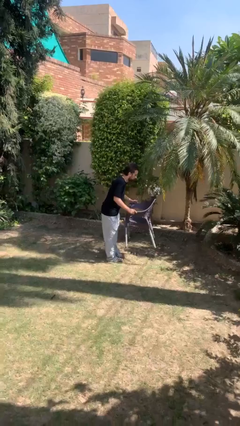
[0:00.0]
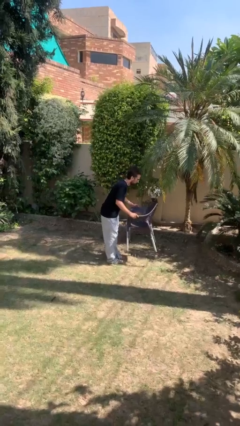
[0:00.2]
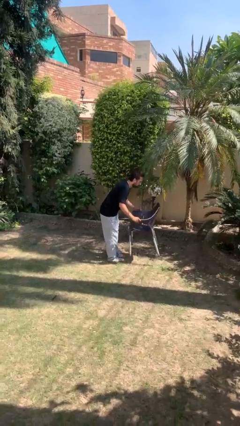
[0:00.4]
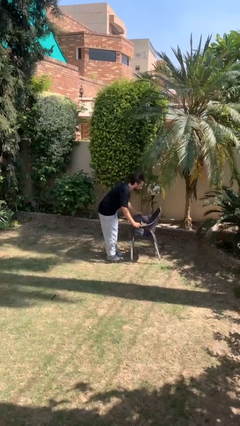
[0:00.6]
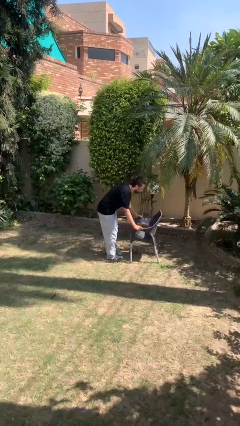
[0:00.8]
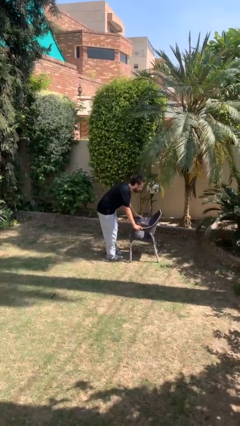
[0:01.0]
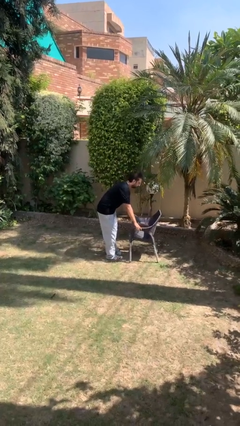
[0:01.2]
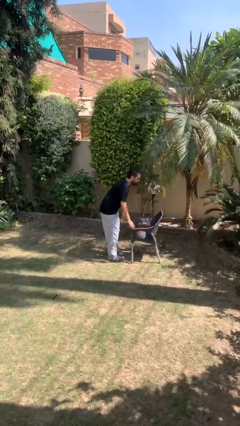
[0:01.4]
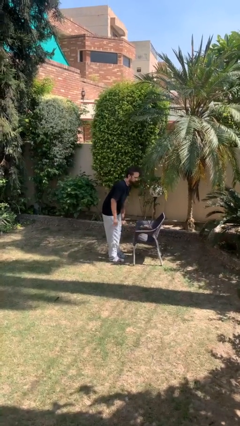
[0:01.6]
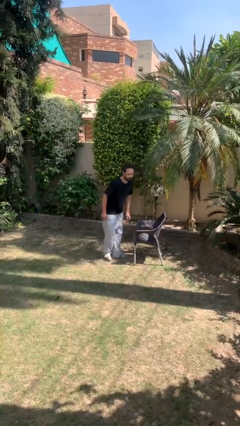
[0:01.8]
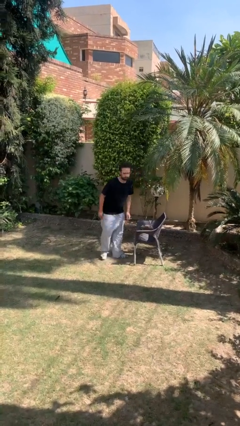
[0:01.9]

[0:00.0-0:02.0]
person puts down object on floor

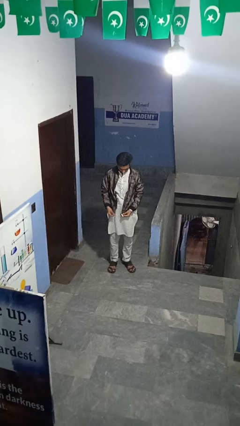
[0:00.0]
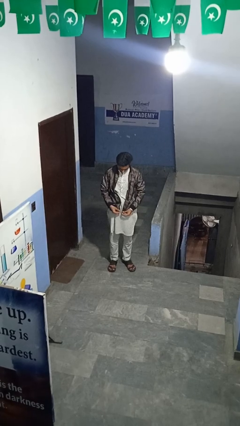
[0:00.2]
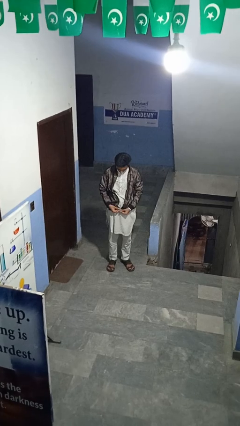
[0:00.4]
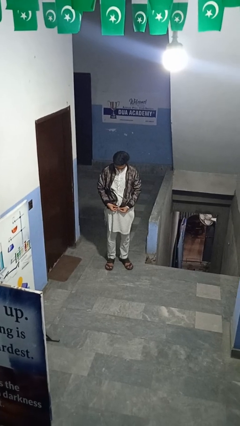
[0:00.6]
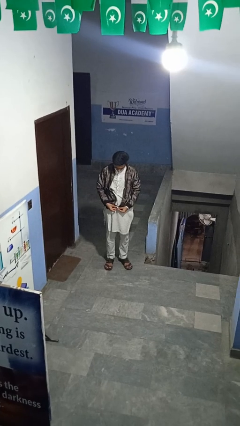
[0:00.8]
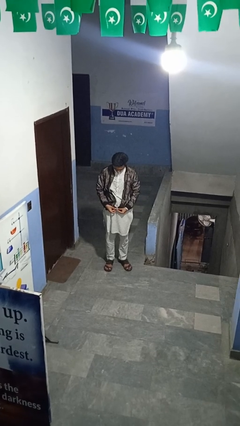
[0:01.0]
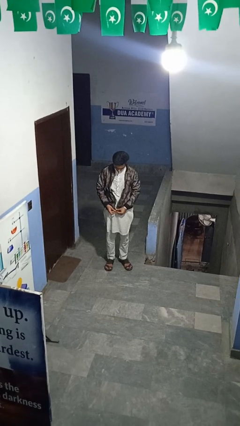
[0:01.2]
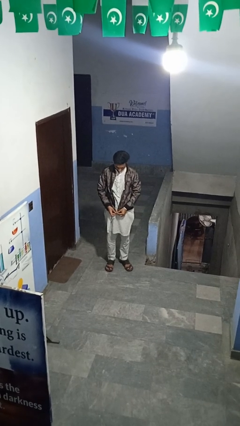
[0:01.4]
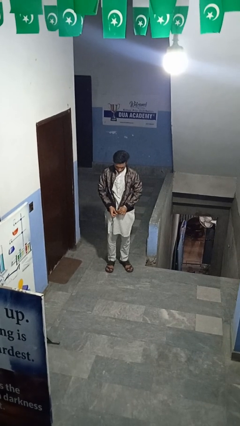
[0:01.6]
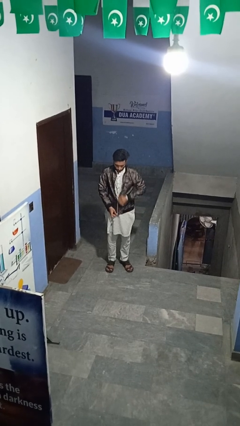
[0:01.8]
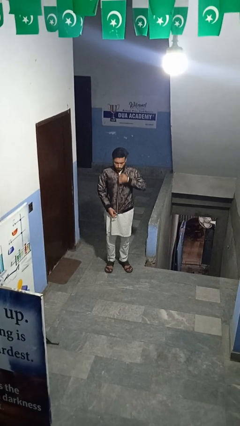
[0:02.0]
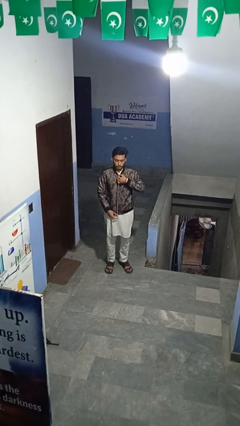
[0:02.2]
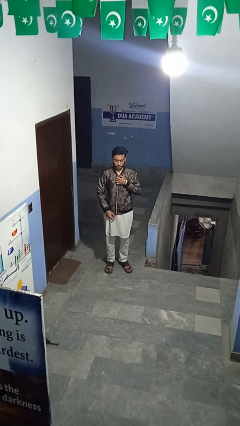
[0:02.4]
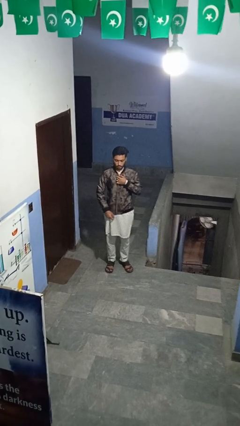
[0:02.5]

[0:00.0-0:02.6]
person zips up jacket

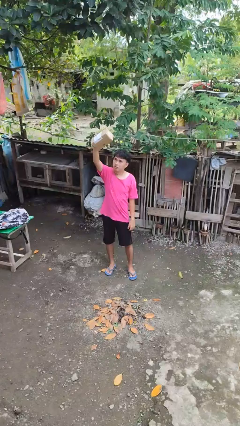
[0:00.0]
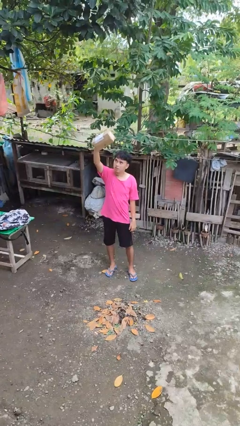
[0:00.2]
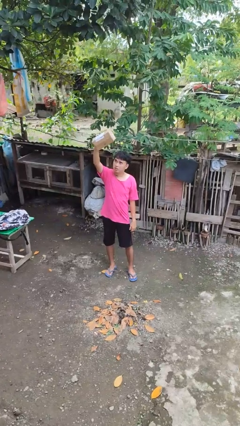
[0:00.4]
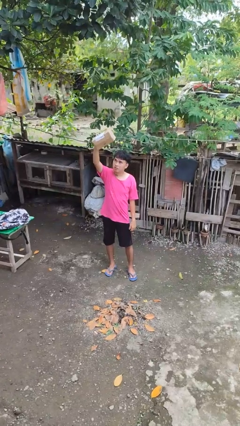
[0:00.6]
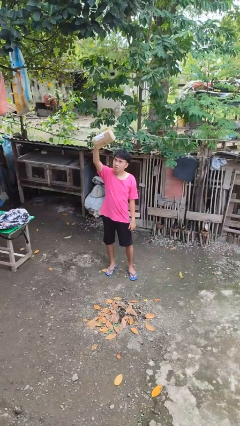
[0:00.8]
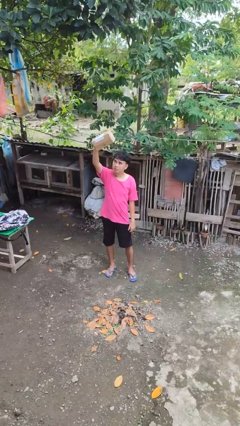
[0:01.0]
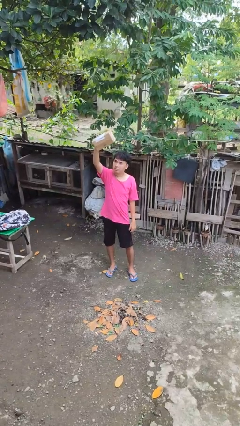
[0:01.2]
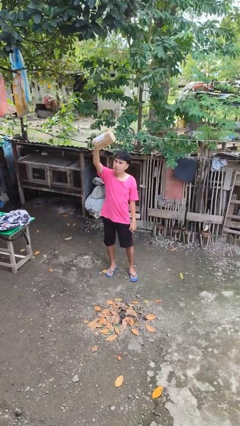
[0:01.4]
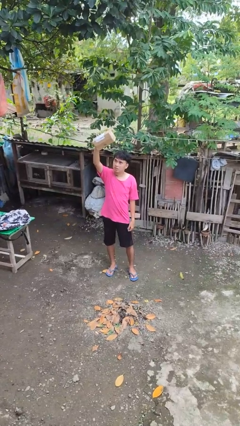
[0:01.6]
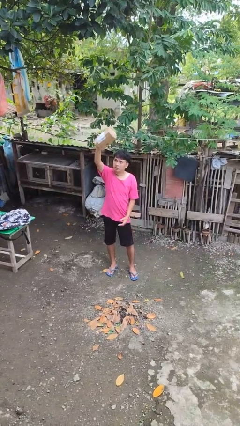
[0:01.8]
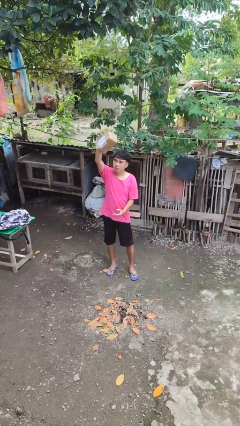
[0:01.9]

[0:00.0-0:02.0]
person drops object

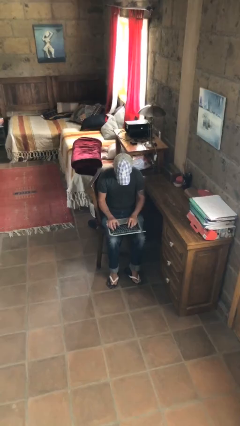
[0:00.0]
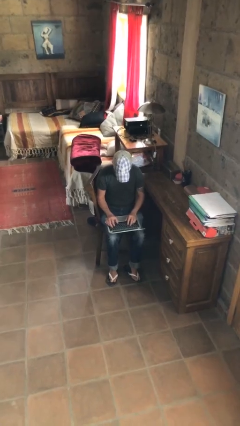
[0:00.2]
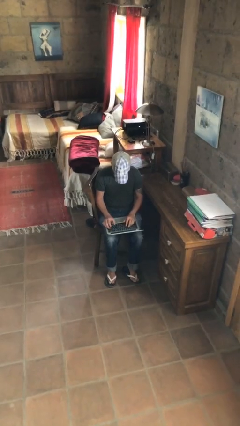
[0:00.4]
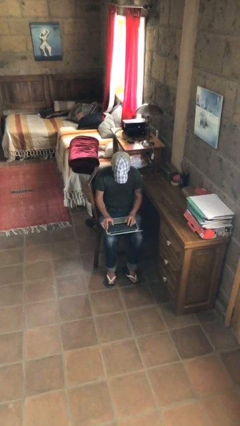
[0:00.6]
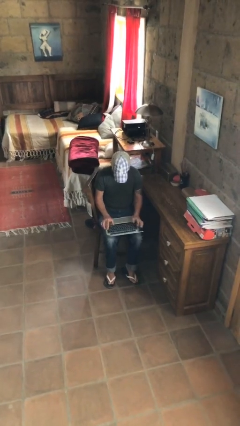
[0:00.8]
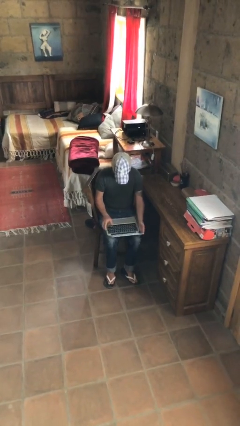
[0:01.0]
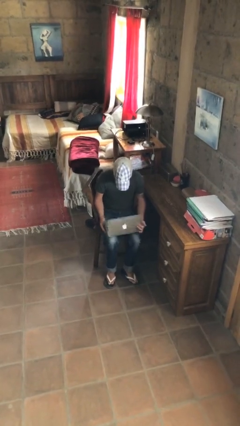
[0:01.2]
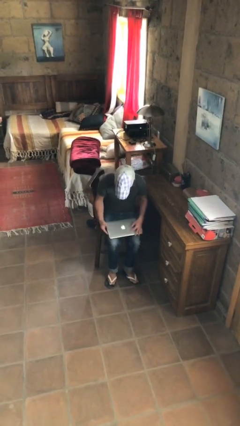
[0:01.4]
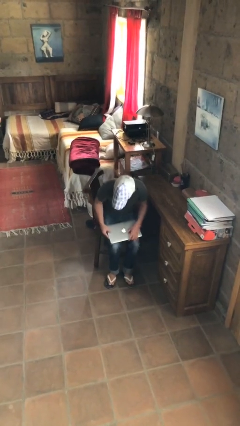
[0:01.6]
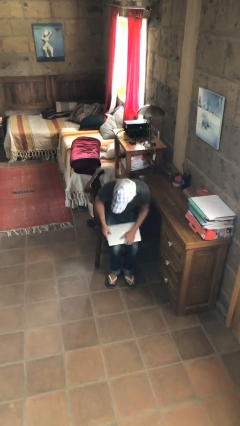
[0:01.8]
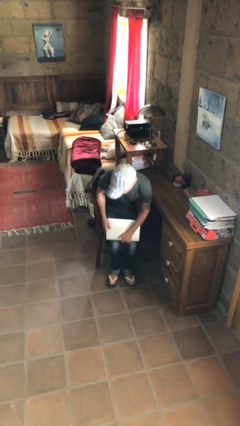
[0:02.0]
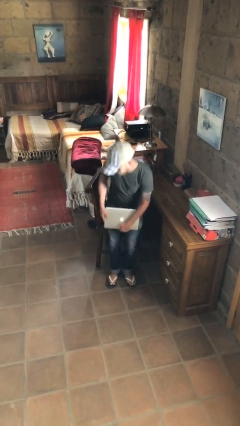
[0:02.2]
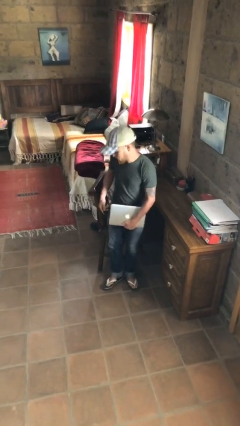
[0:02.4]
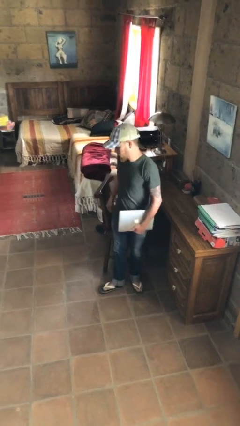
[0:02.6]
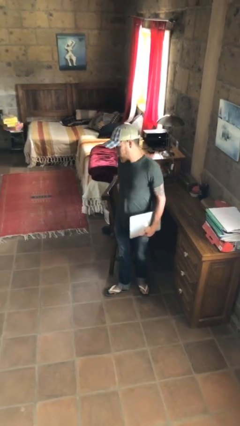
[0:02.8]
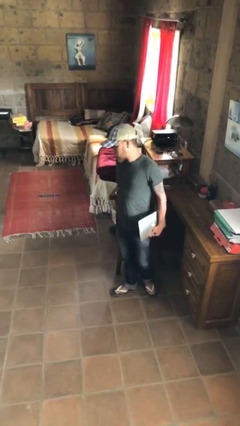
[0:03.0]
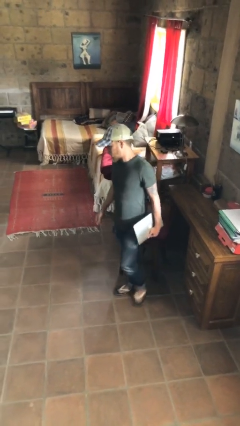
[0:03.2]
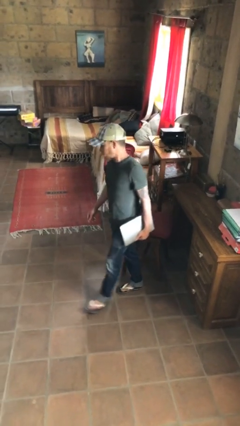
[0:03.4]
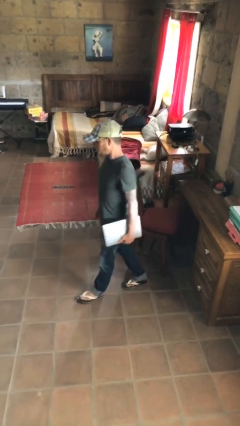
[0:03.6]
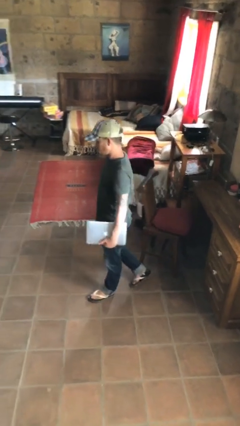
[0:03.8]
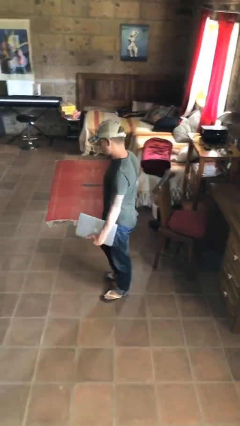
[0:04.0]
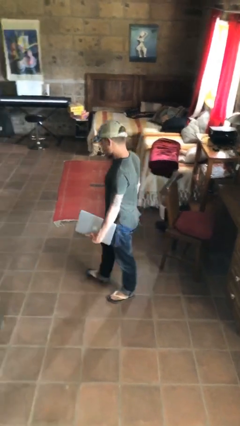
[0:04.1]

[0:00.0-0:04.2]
person stands up

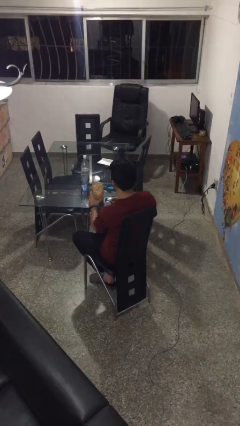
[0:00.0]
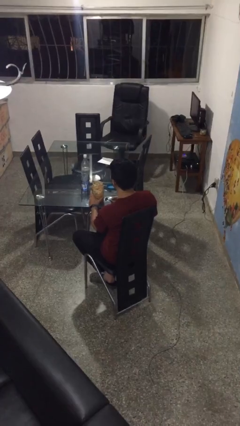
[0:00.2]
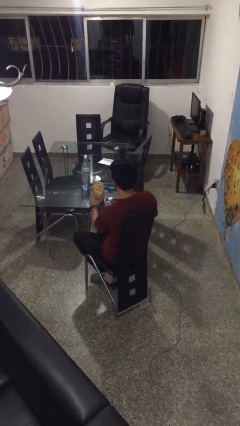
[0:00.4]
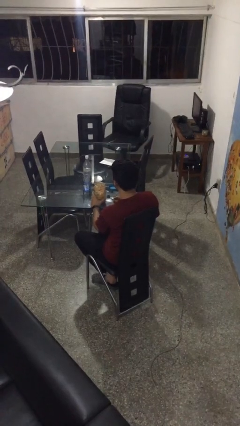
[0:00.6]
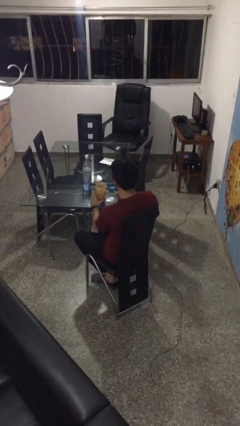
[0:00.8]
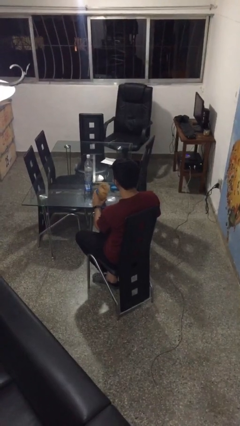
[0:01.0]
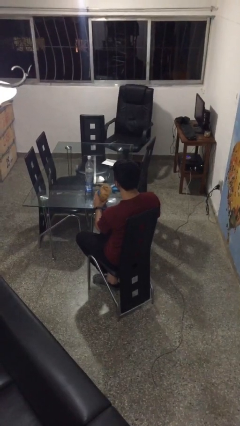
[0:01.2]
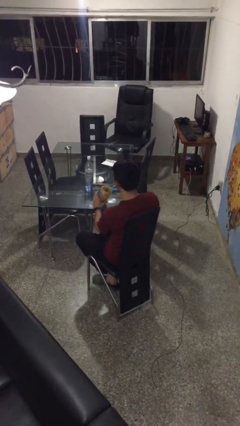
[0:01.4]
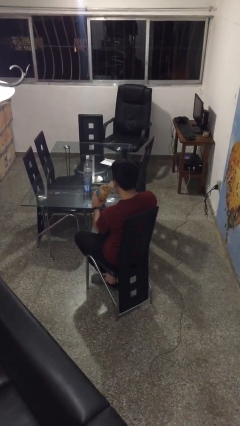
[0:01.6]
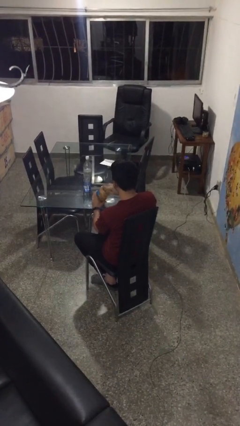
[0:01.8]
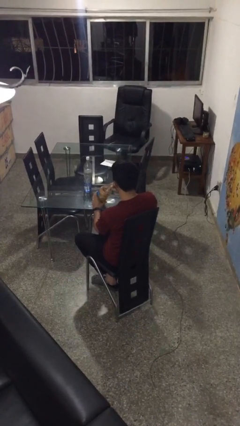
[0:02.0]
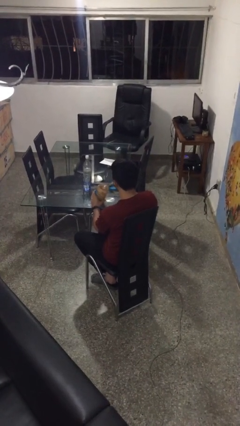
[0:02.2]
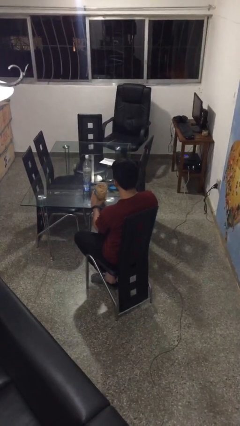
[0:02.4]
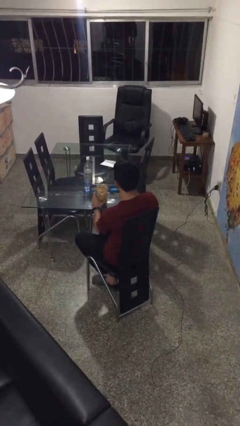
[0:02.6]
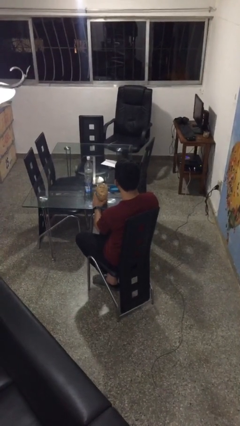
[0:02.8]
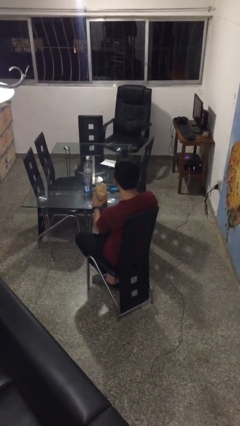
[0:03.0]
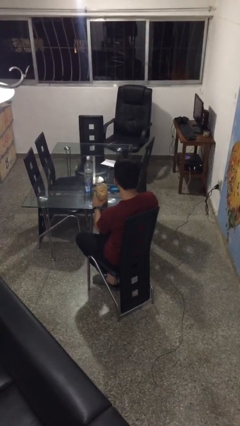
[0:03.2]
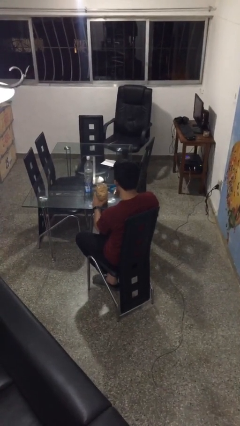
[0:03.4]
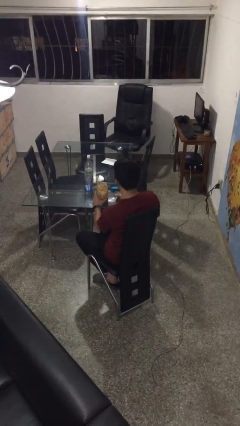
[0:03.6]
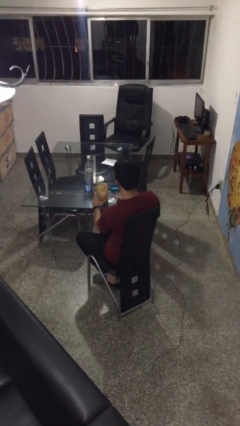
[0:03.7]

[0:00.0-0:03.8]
person eats with utensil

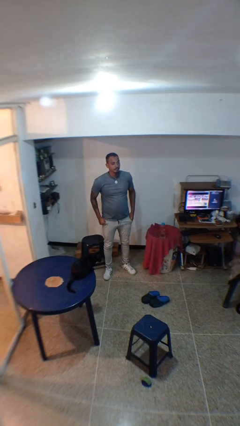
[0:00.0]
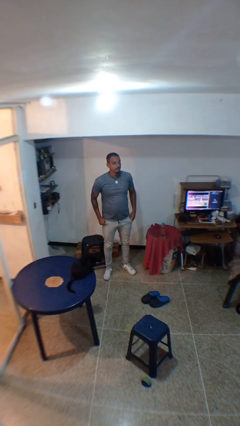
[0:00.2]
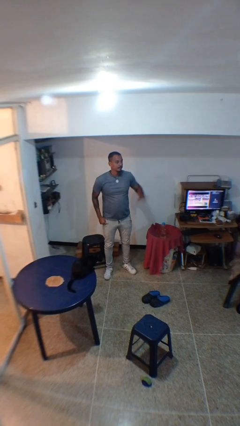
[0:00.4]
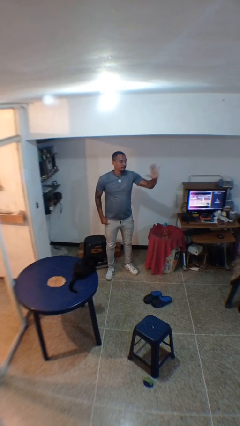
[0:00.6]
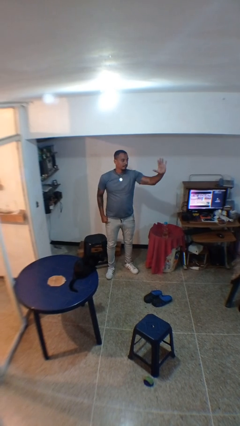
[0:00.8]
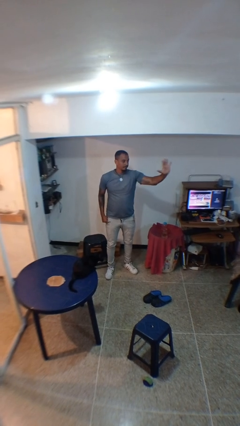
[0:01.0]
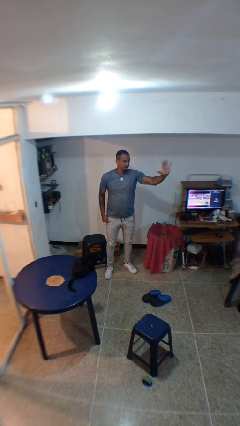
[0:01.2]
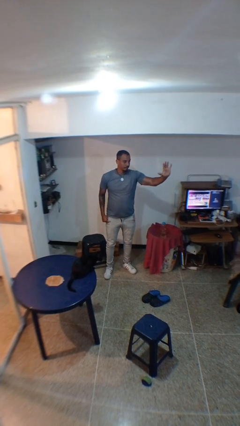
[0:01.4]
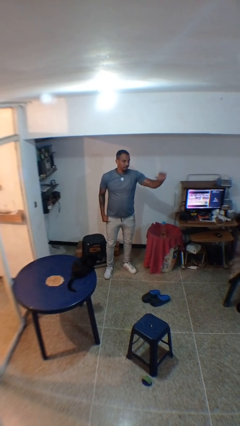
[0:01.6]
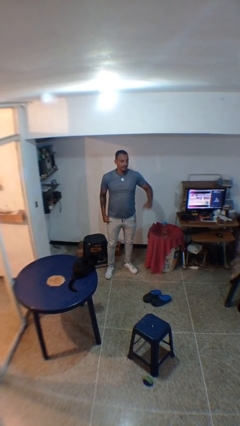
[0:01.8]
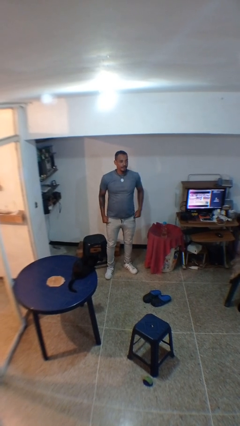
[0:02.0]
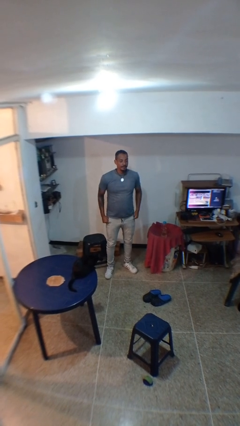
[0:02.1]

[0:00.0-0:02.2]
person gestures number five

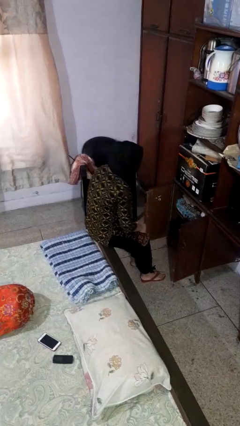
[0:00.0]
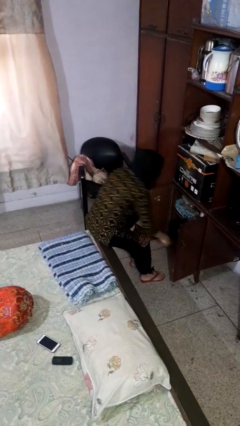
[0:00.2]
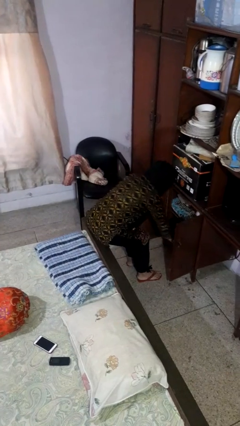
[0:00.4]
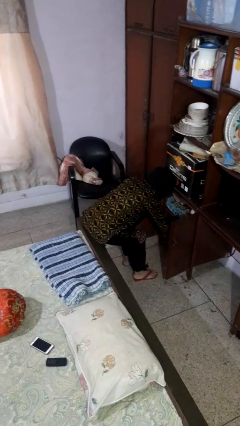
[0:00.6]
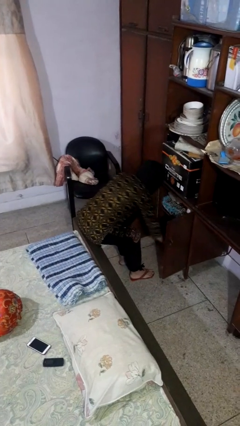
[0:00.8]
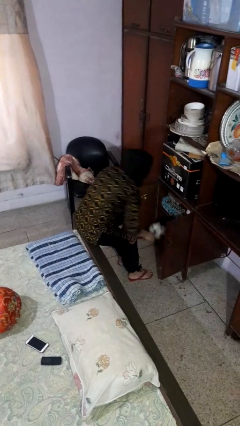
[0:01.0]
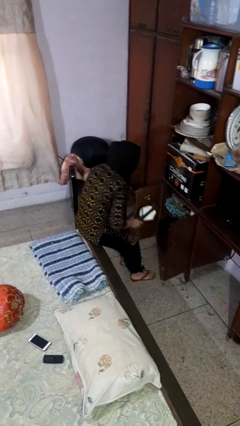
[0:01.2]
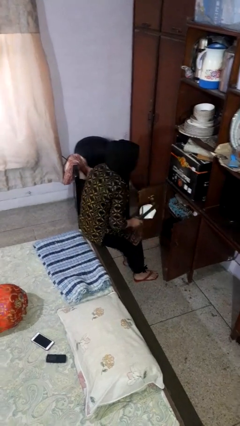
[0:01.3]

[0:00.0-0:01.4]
person takes object from cabinet
